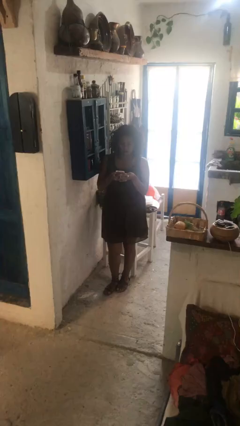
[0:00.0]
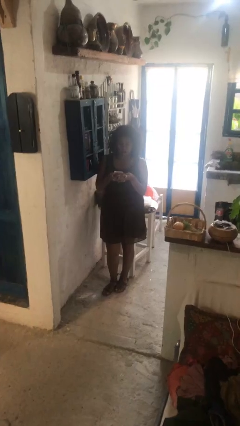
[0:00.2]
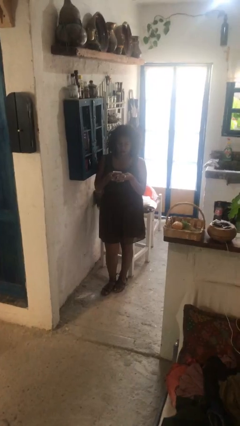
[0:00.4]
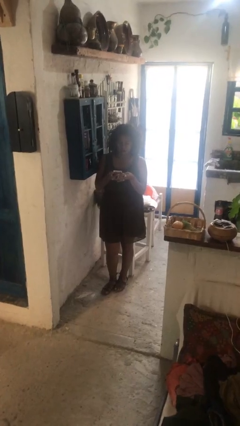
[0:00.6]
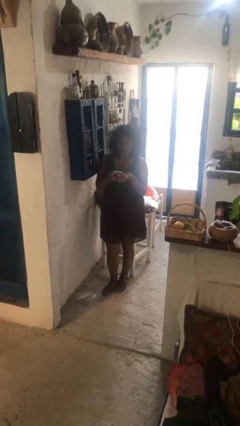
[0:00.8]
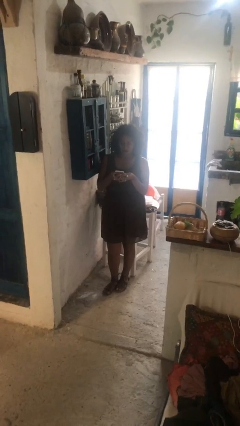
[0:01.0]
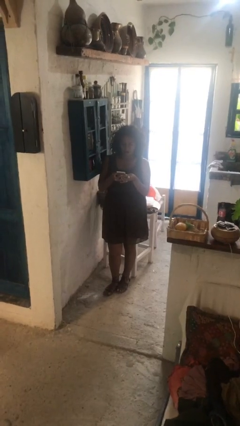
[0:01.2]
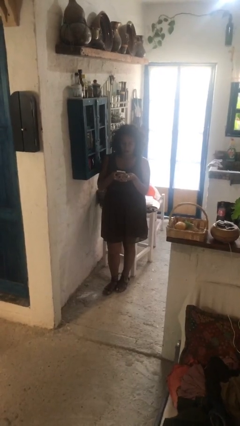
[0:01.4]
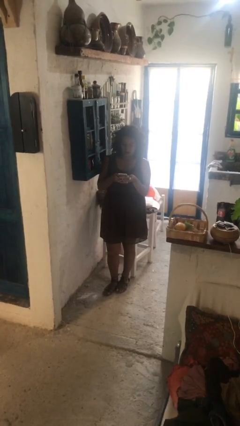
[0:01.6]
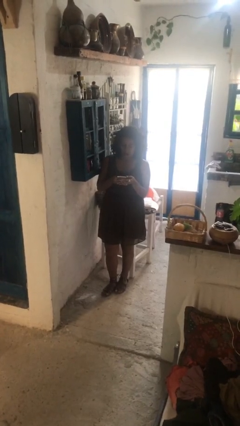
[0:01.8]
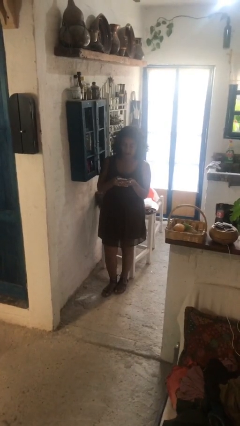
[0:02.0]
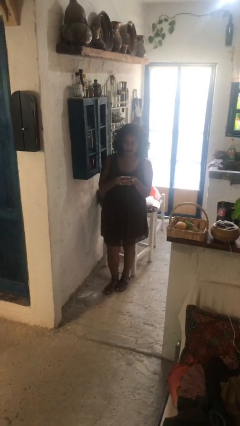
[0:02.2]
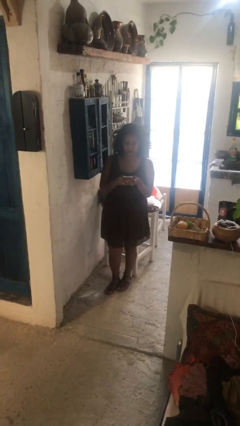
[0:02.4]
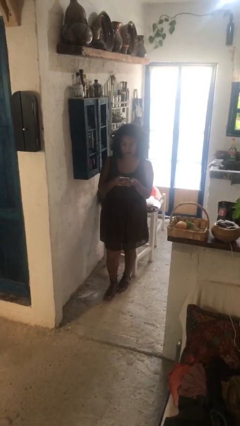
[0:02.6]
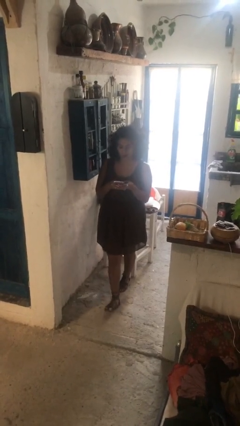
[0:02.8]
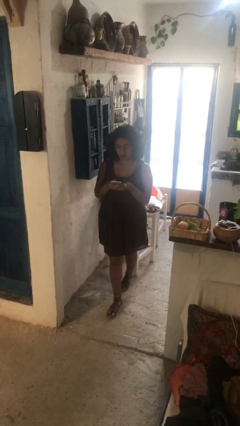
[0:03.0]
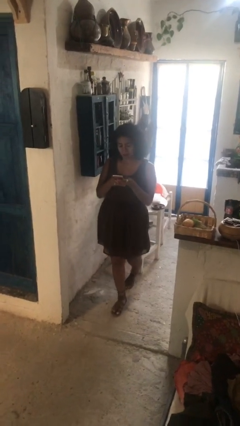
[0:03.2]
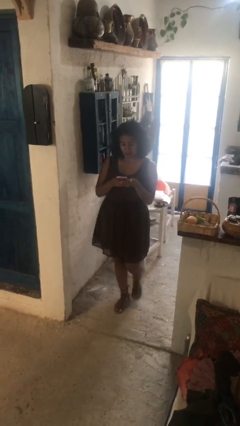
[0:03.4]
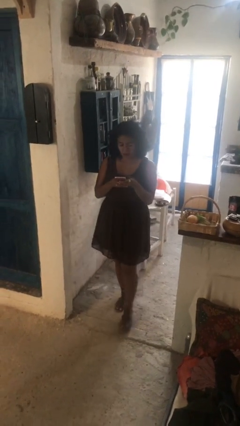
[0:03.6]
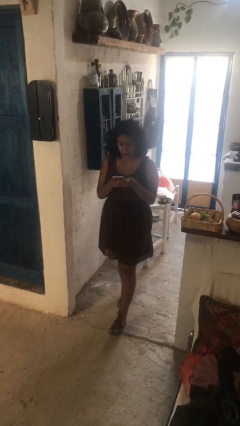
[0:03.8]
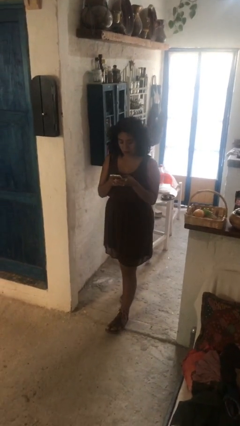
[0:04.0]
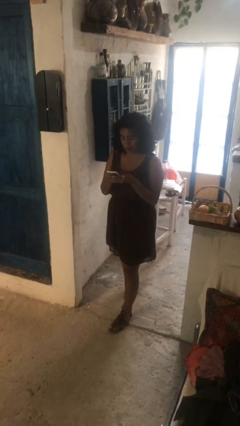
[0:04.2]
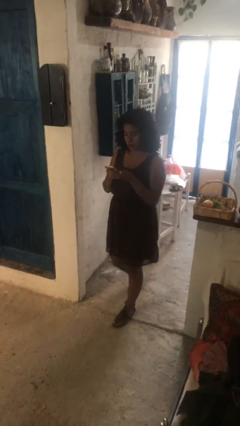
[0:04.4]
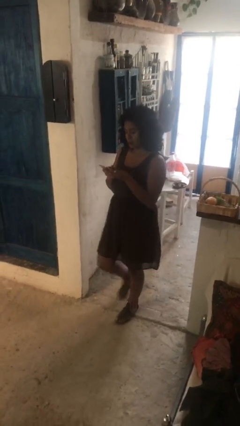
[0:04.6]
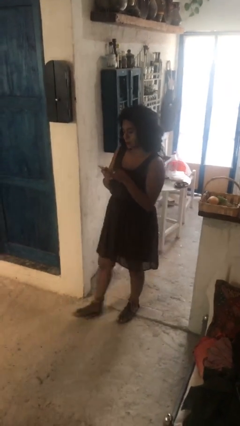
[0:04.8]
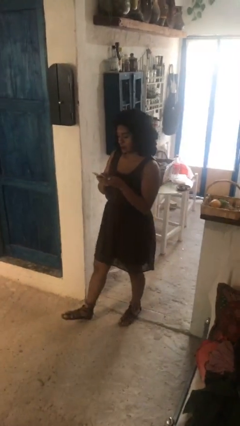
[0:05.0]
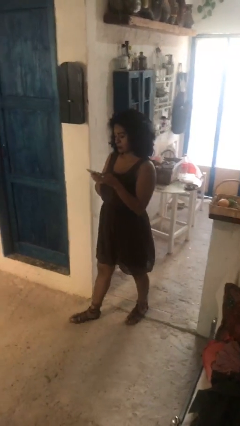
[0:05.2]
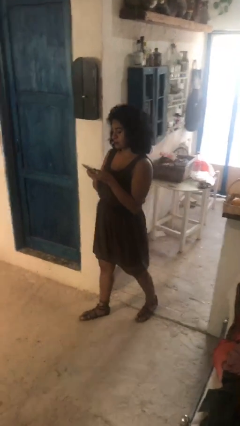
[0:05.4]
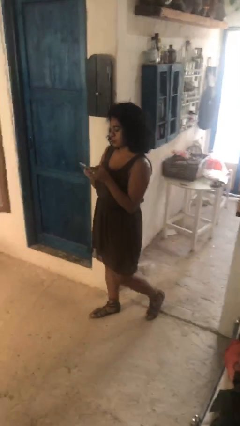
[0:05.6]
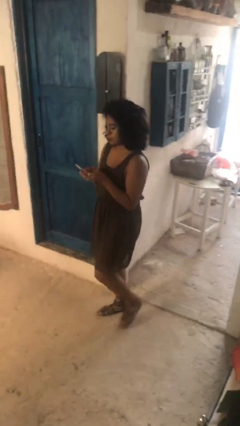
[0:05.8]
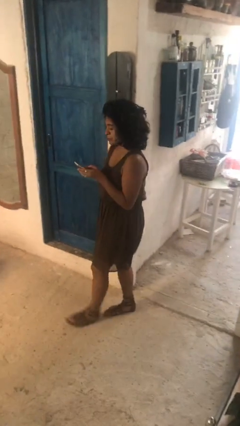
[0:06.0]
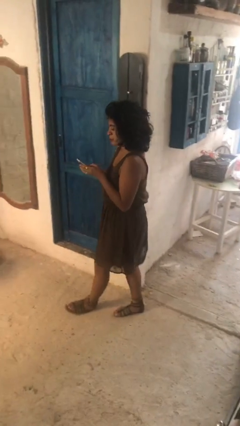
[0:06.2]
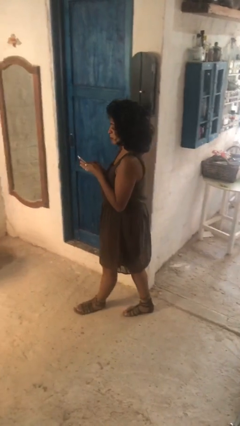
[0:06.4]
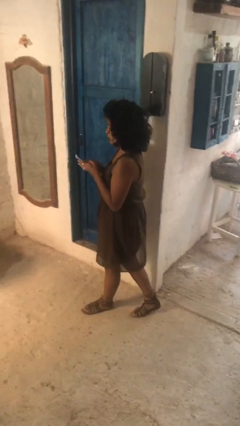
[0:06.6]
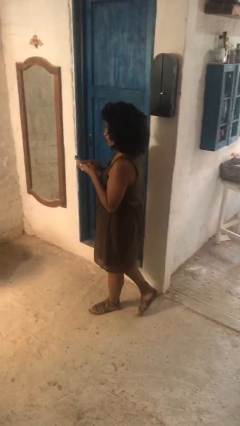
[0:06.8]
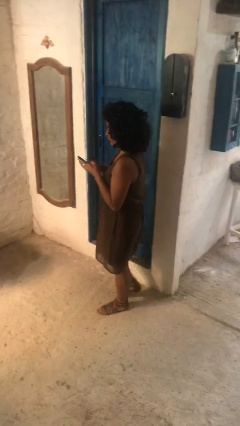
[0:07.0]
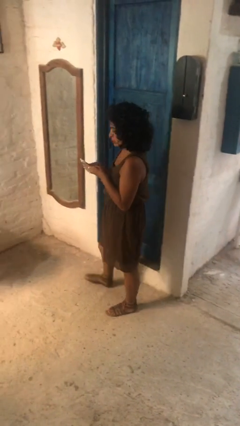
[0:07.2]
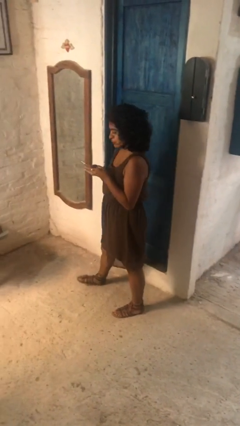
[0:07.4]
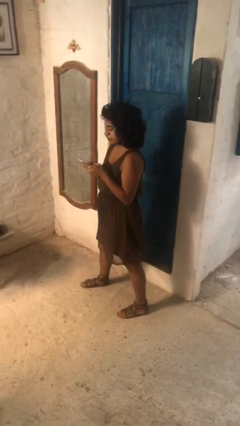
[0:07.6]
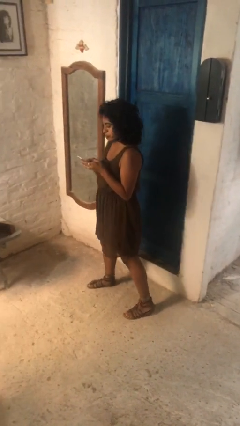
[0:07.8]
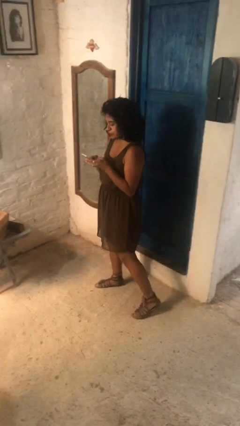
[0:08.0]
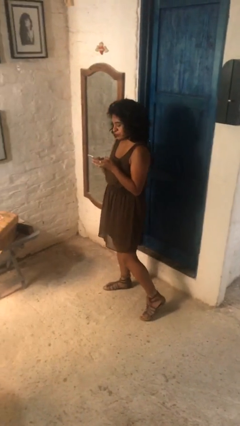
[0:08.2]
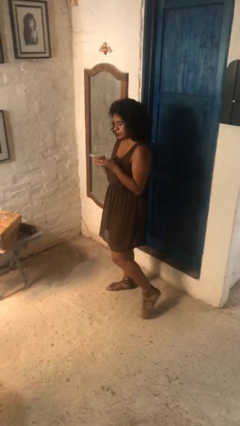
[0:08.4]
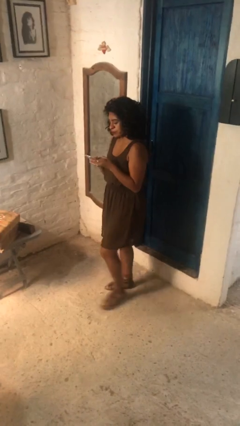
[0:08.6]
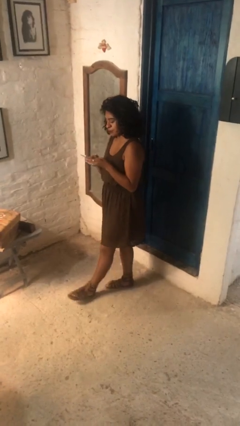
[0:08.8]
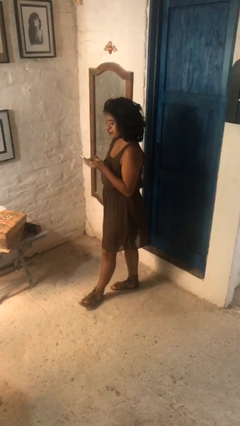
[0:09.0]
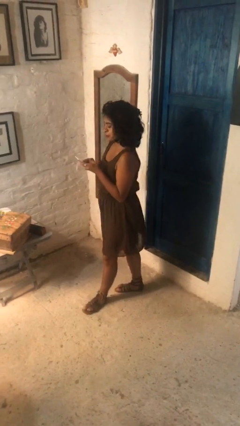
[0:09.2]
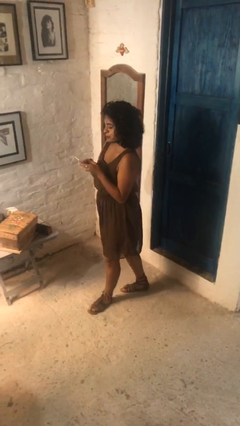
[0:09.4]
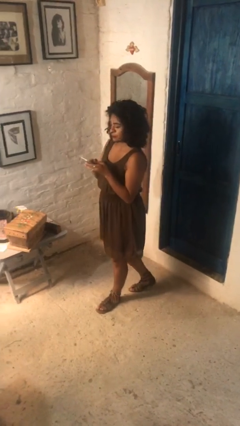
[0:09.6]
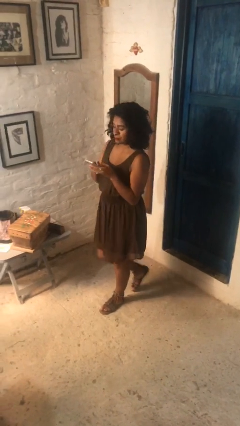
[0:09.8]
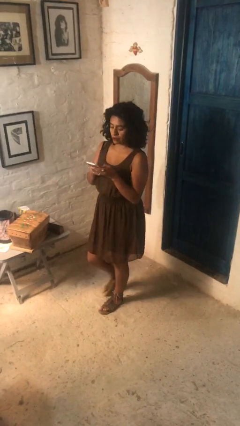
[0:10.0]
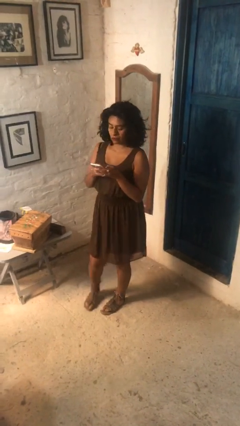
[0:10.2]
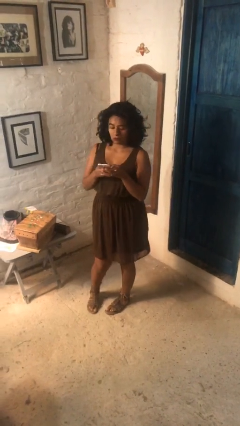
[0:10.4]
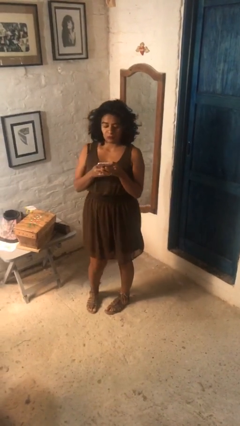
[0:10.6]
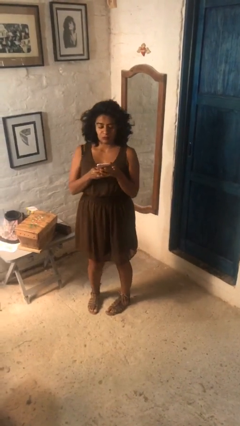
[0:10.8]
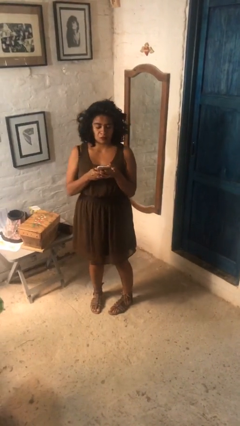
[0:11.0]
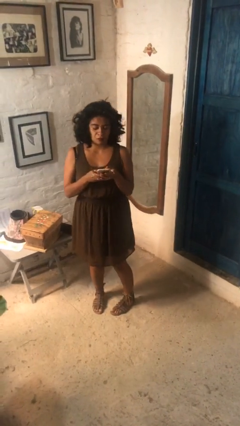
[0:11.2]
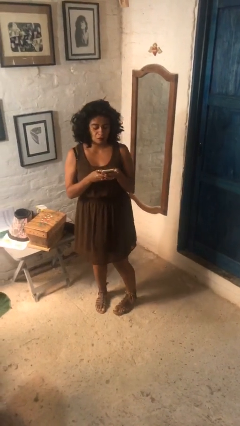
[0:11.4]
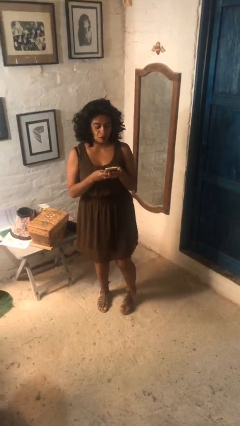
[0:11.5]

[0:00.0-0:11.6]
person texts on phone

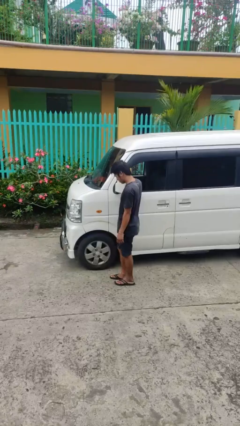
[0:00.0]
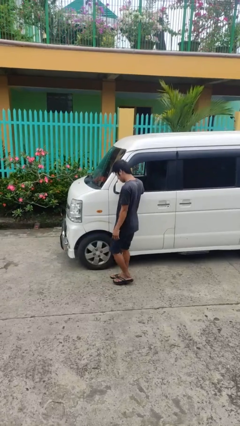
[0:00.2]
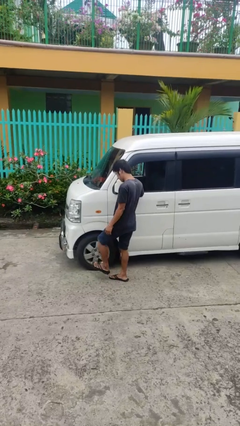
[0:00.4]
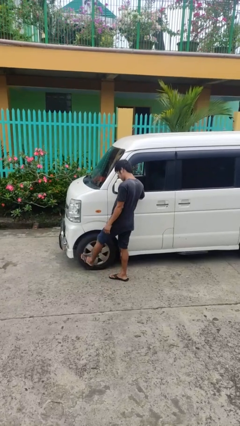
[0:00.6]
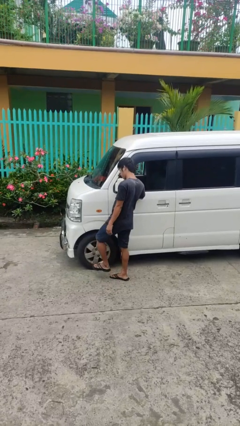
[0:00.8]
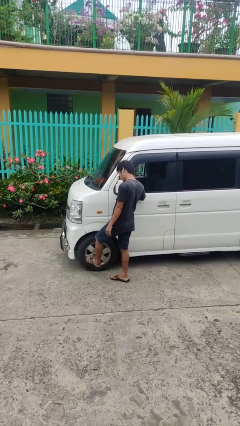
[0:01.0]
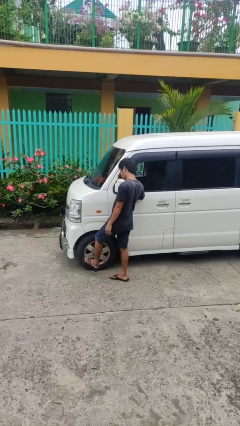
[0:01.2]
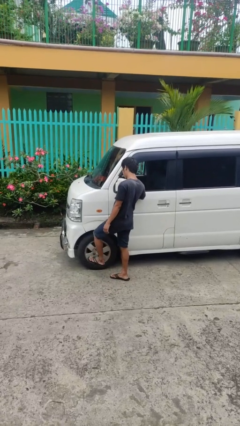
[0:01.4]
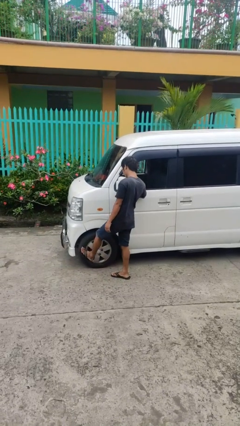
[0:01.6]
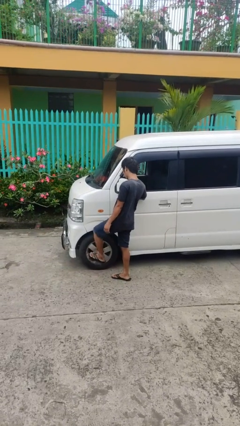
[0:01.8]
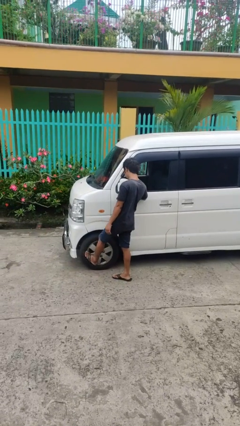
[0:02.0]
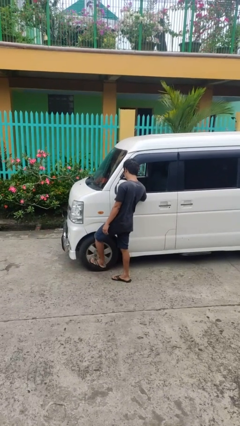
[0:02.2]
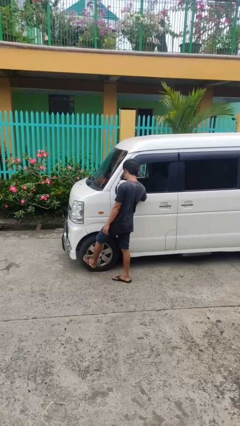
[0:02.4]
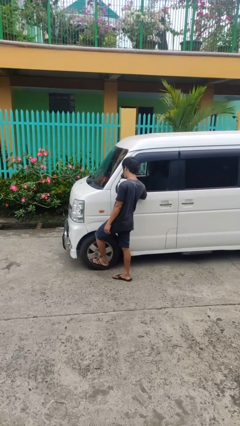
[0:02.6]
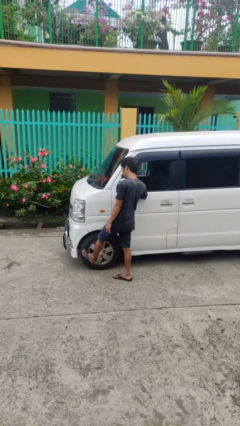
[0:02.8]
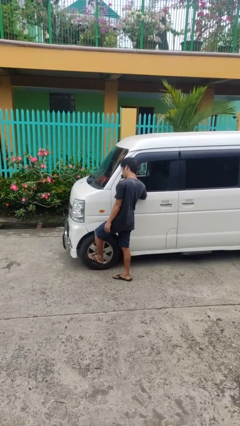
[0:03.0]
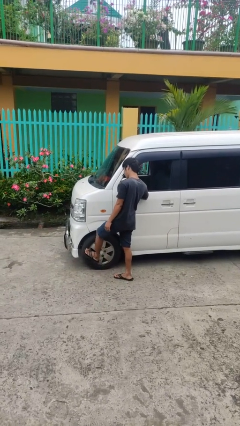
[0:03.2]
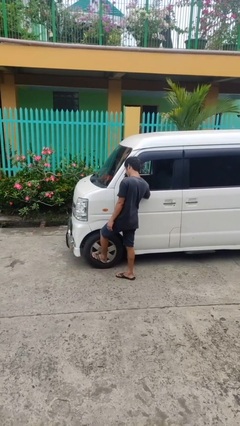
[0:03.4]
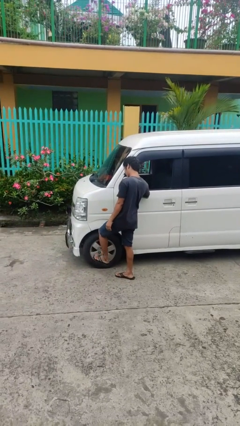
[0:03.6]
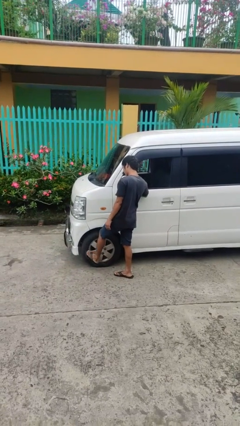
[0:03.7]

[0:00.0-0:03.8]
person kicks car tires

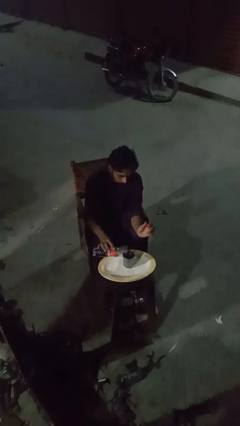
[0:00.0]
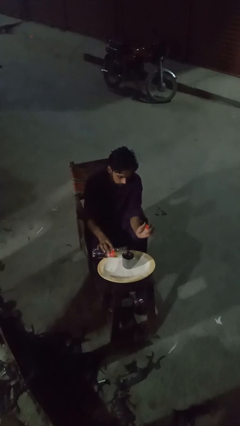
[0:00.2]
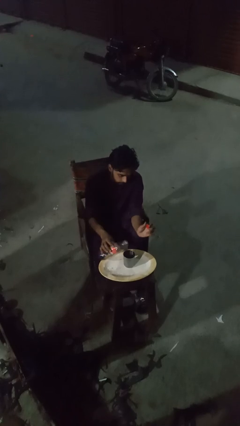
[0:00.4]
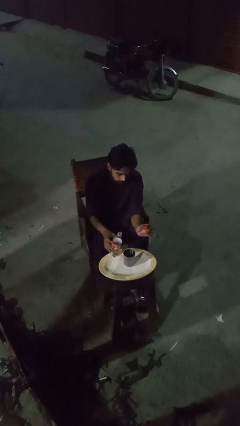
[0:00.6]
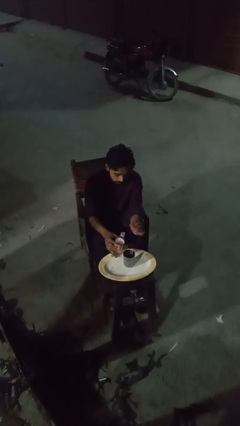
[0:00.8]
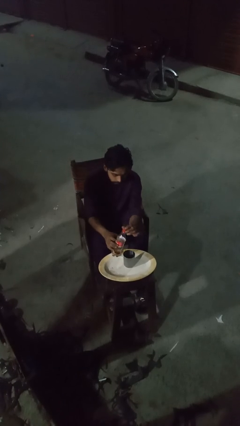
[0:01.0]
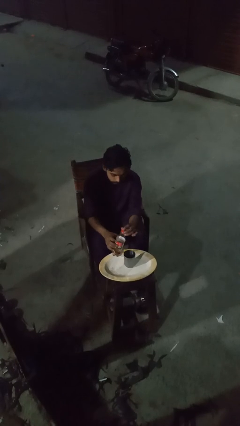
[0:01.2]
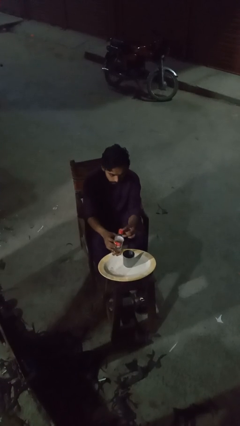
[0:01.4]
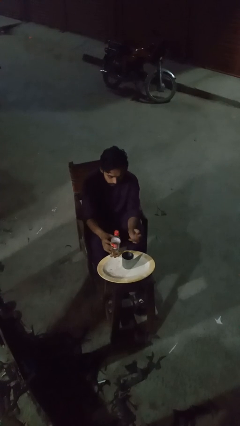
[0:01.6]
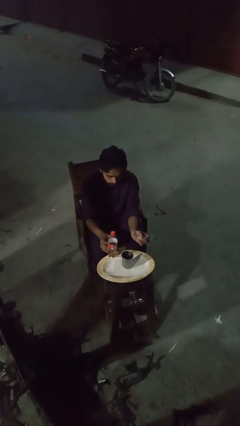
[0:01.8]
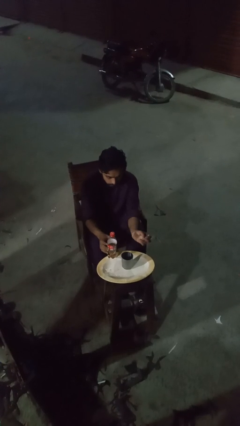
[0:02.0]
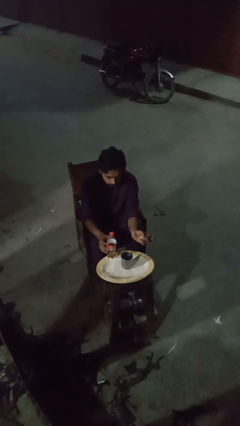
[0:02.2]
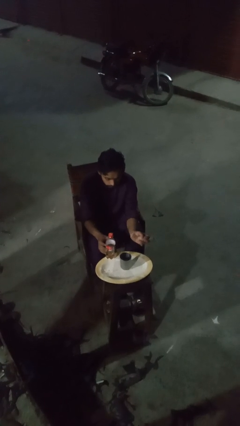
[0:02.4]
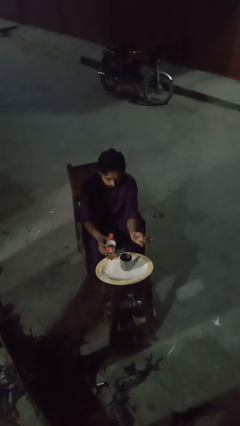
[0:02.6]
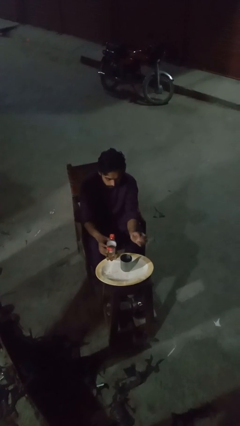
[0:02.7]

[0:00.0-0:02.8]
person screws lid to bottle
